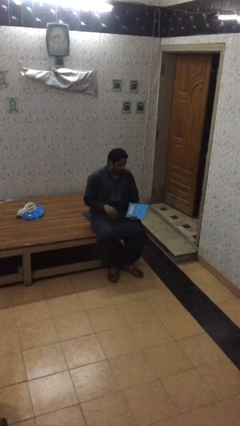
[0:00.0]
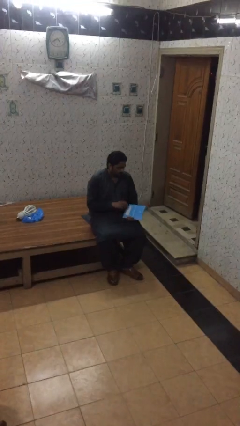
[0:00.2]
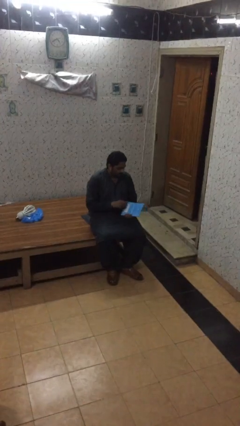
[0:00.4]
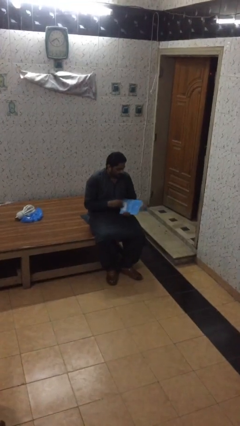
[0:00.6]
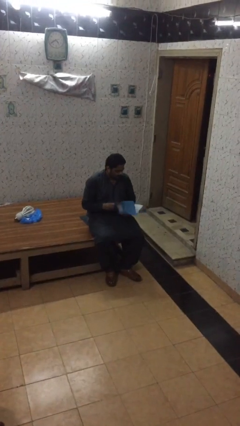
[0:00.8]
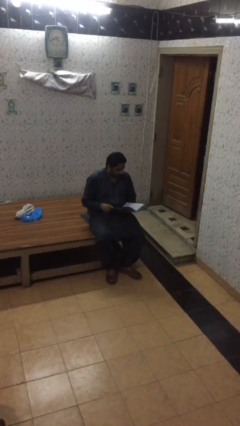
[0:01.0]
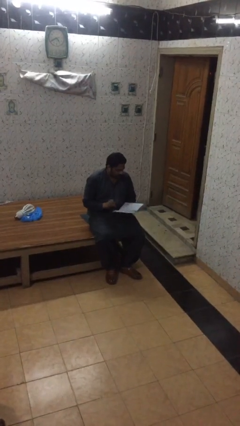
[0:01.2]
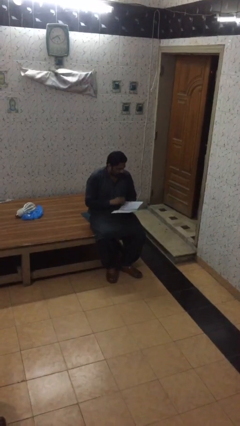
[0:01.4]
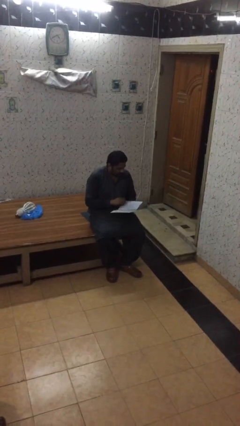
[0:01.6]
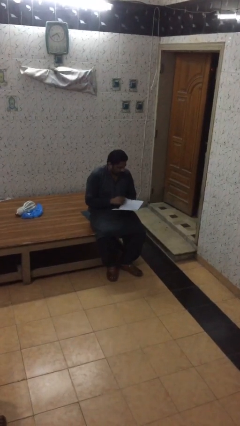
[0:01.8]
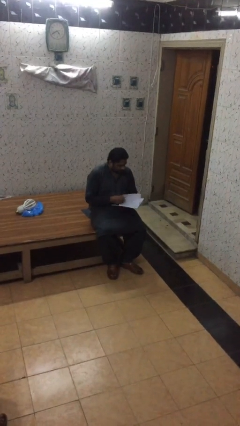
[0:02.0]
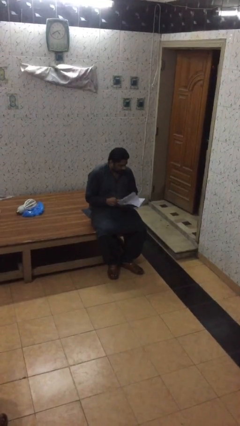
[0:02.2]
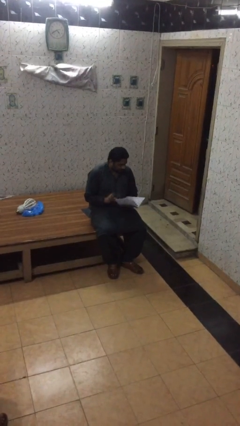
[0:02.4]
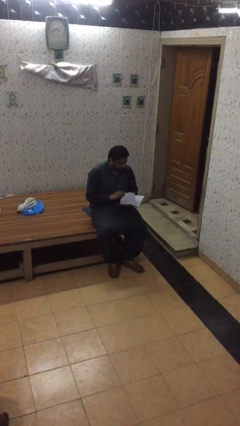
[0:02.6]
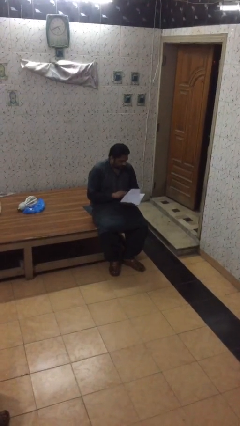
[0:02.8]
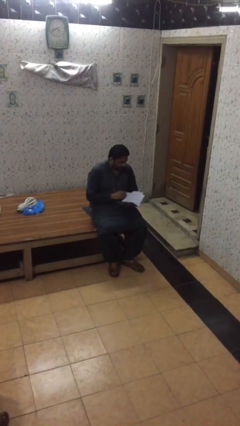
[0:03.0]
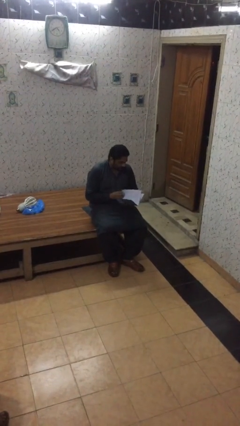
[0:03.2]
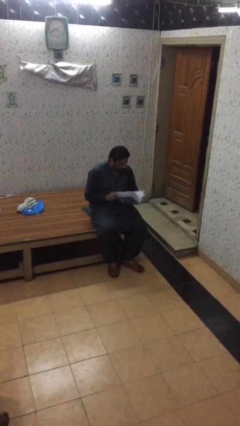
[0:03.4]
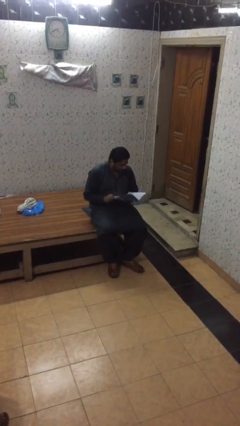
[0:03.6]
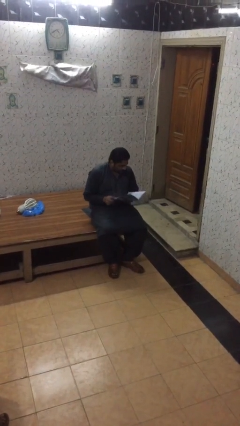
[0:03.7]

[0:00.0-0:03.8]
person reads document

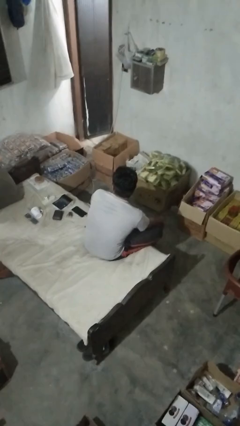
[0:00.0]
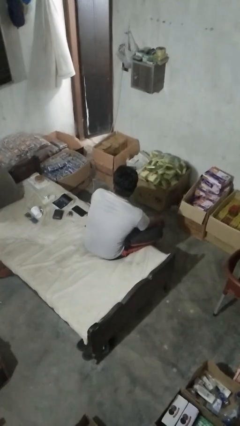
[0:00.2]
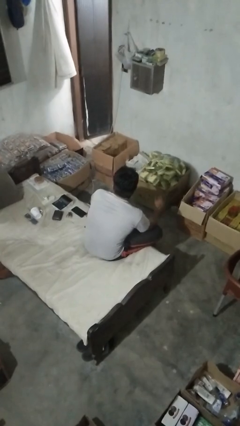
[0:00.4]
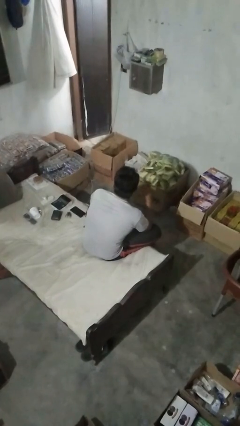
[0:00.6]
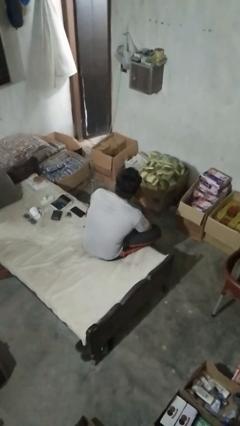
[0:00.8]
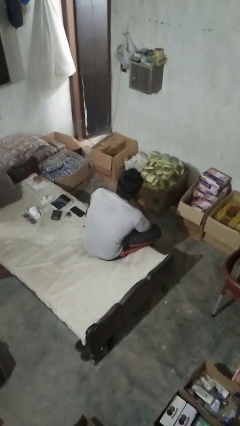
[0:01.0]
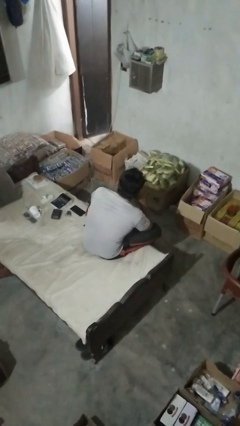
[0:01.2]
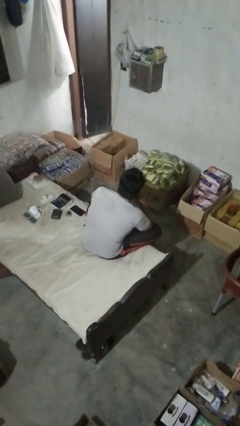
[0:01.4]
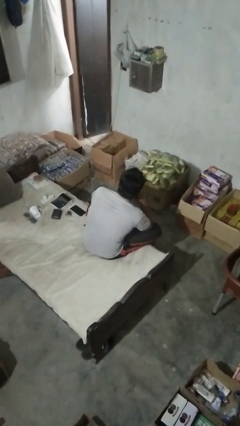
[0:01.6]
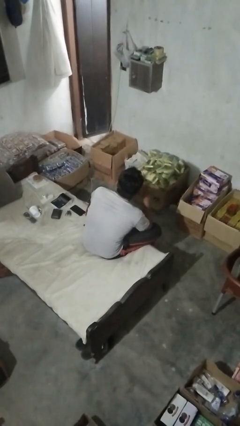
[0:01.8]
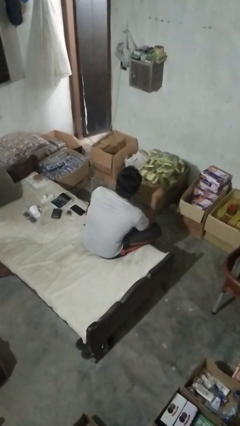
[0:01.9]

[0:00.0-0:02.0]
person strokes chin

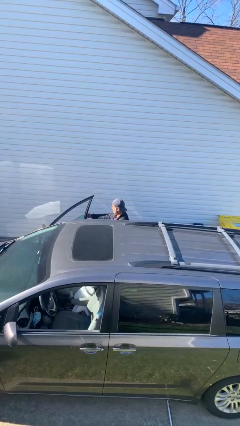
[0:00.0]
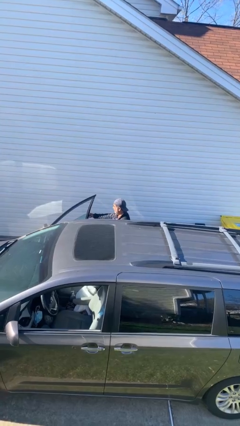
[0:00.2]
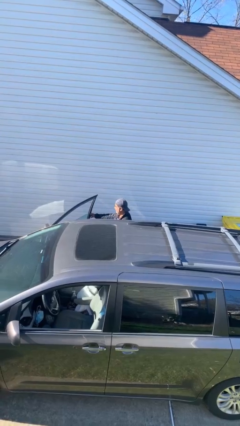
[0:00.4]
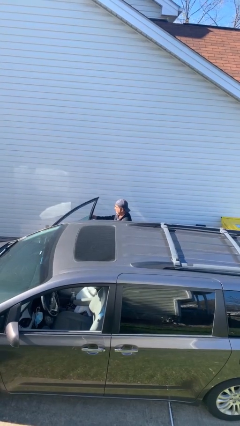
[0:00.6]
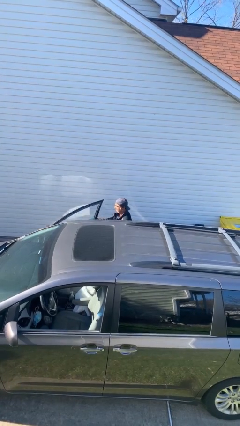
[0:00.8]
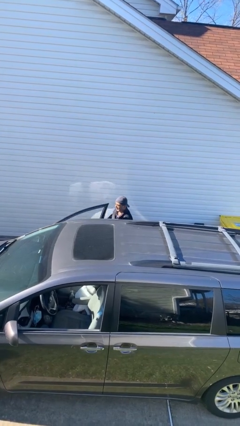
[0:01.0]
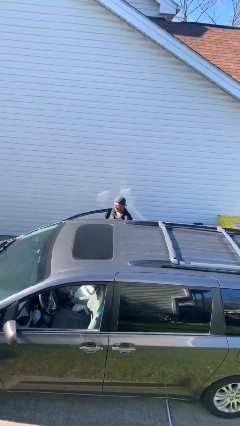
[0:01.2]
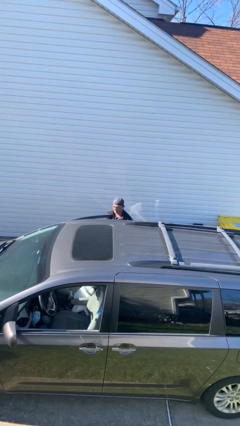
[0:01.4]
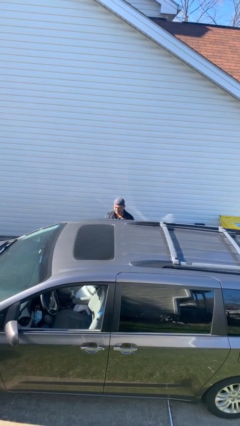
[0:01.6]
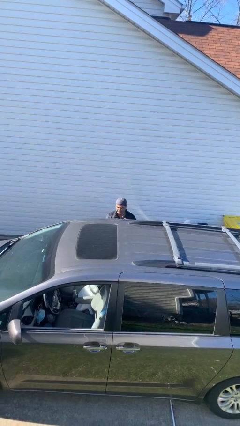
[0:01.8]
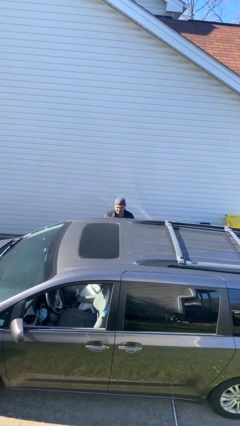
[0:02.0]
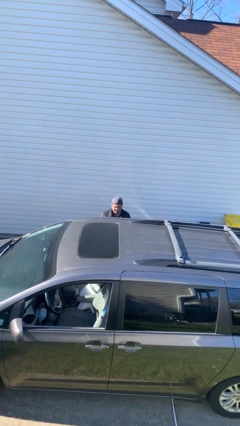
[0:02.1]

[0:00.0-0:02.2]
person closes car door

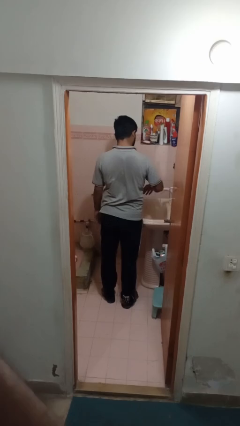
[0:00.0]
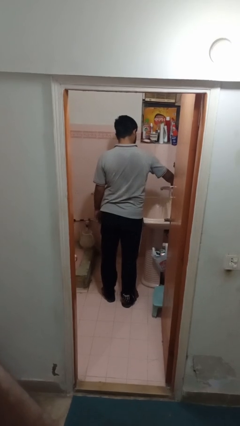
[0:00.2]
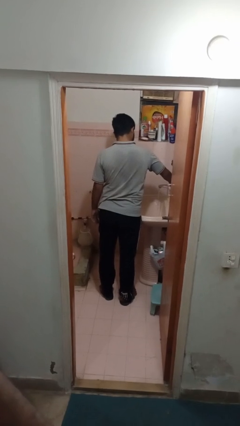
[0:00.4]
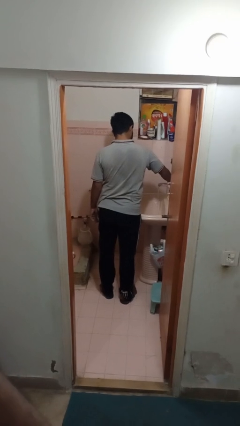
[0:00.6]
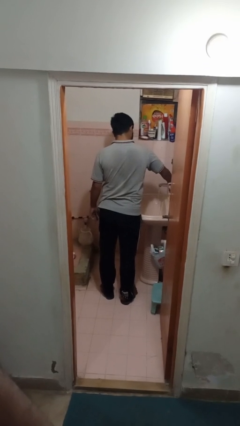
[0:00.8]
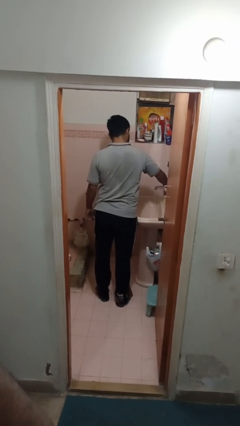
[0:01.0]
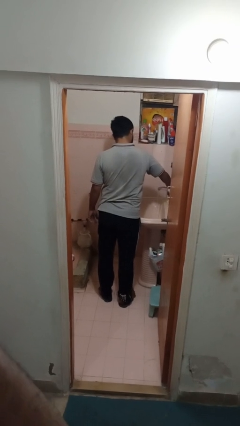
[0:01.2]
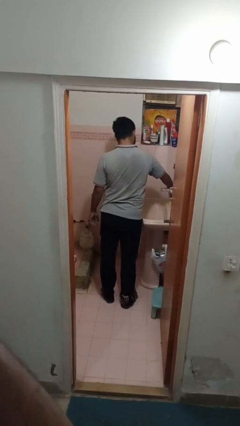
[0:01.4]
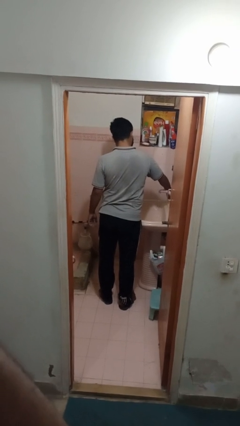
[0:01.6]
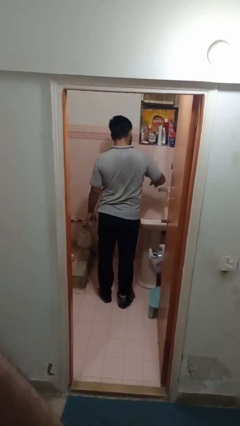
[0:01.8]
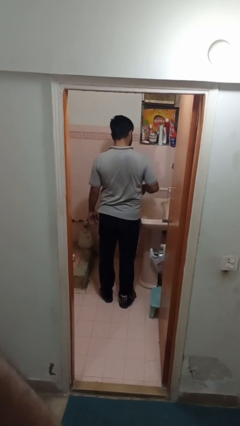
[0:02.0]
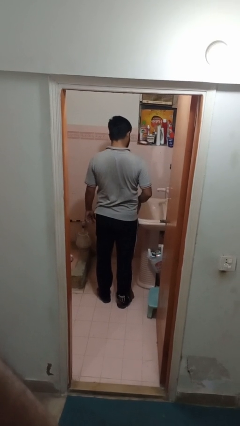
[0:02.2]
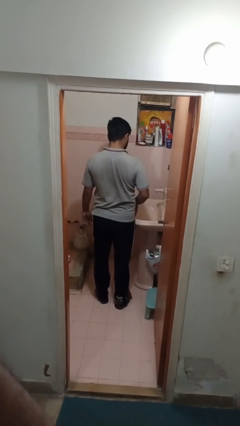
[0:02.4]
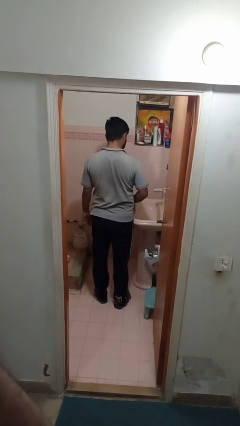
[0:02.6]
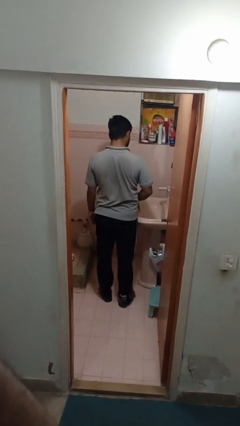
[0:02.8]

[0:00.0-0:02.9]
person turns off faucet

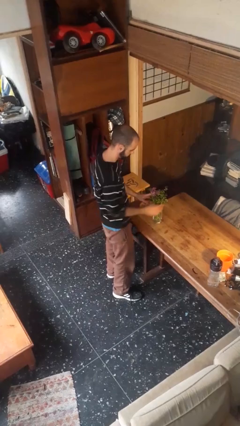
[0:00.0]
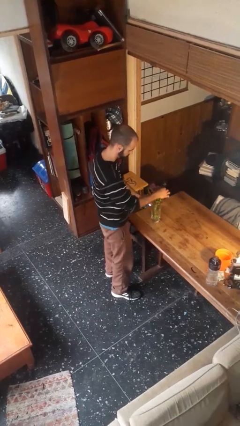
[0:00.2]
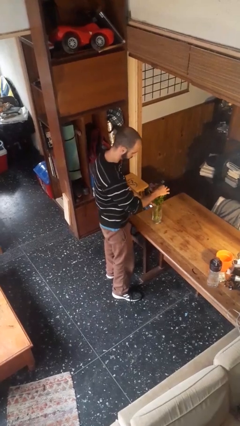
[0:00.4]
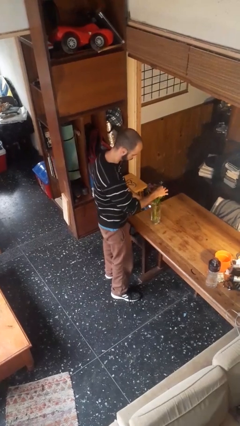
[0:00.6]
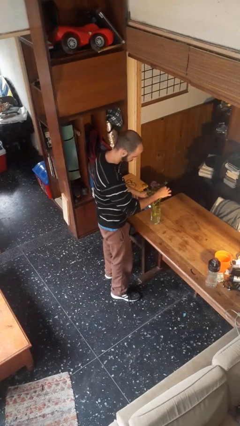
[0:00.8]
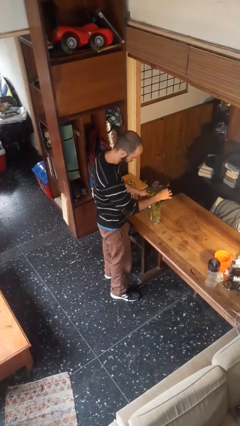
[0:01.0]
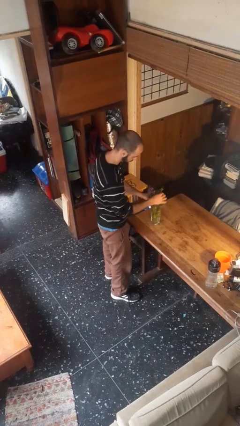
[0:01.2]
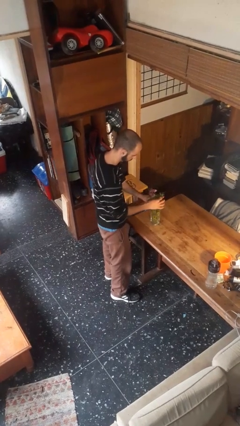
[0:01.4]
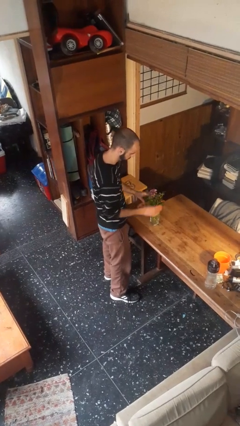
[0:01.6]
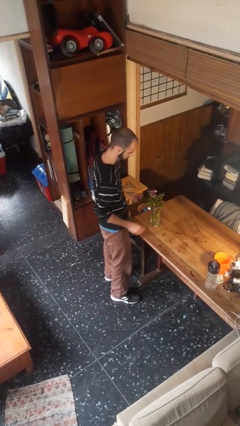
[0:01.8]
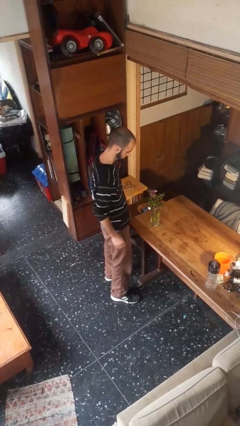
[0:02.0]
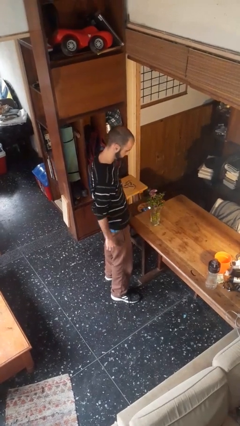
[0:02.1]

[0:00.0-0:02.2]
person arranges flowers in vase

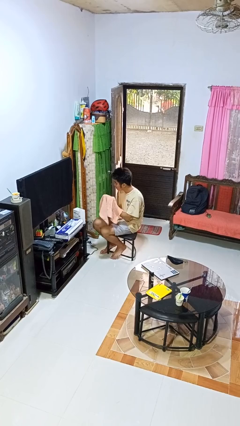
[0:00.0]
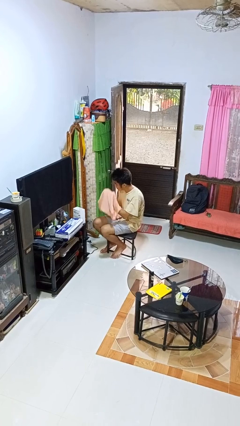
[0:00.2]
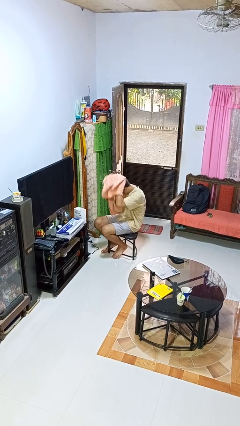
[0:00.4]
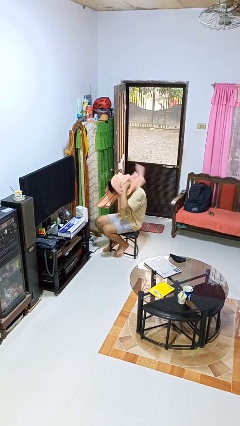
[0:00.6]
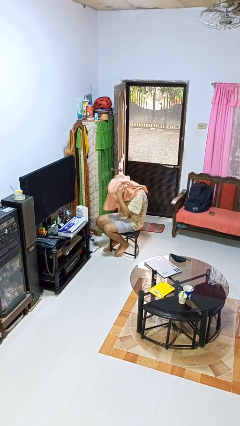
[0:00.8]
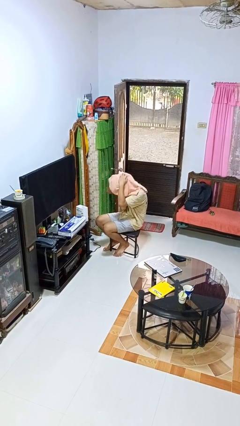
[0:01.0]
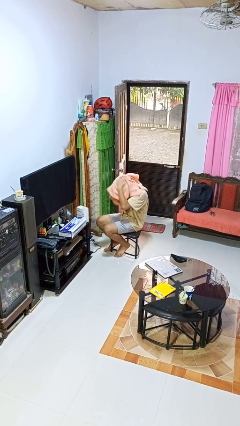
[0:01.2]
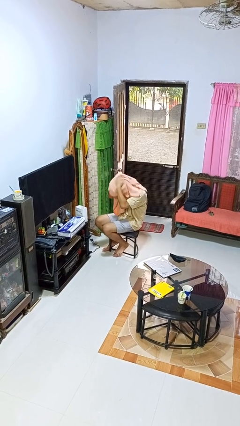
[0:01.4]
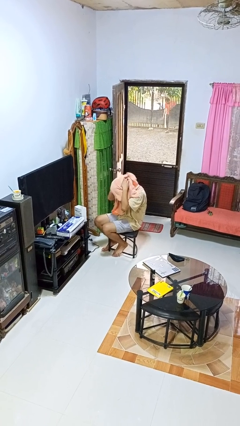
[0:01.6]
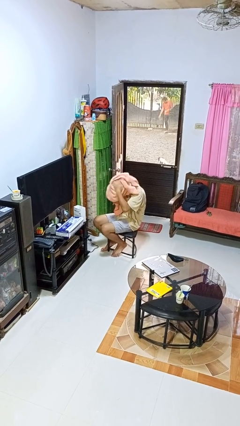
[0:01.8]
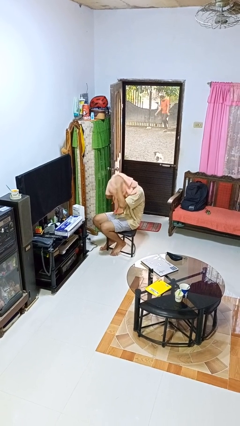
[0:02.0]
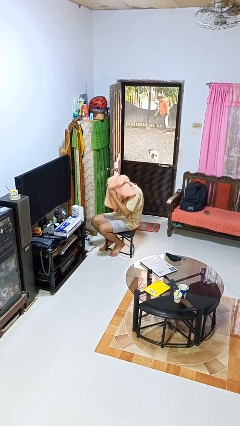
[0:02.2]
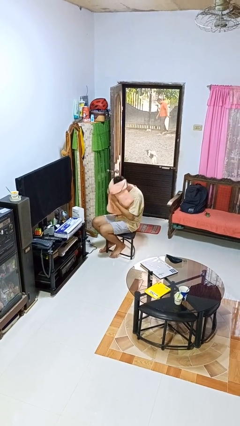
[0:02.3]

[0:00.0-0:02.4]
person dries hair with towel

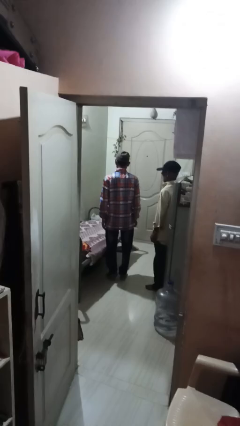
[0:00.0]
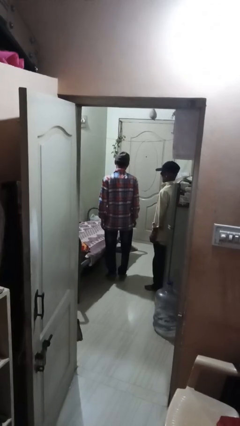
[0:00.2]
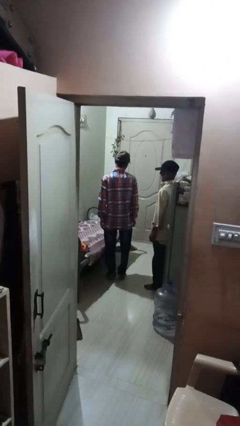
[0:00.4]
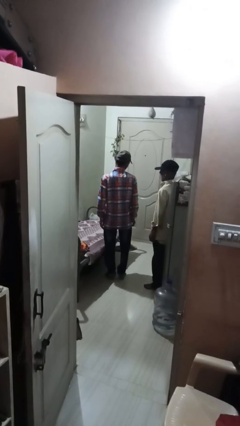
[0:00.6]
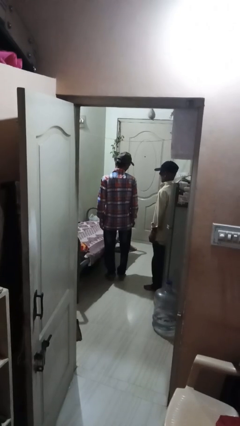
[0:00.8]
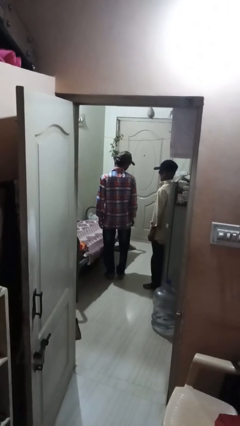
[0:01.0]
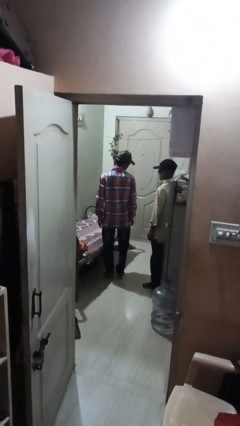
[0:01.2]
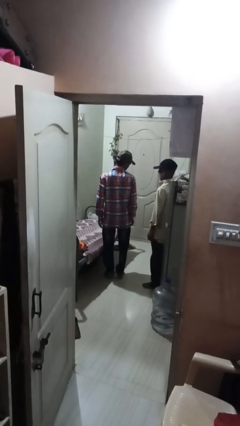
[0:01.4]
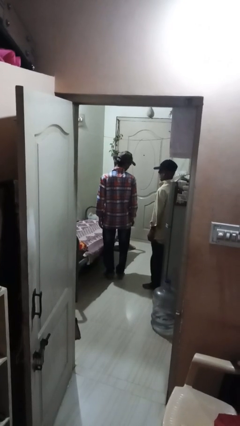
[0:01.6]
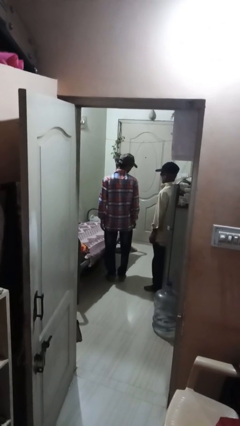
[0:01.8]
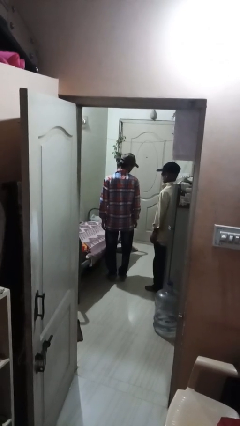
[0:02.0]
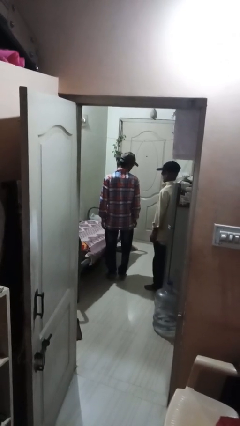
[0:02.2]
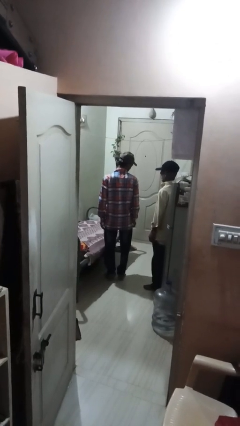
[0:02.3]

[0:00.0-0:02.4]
person looks over shoulder
